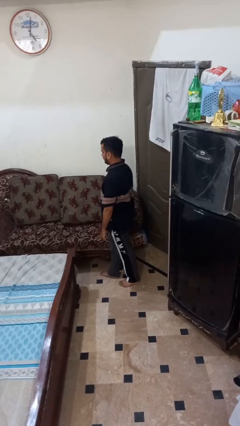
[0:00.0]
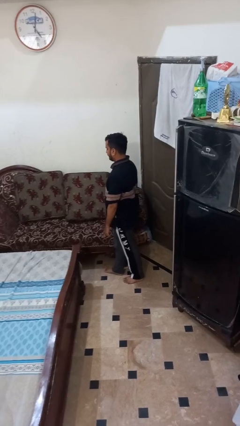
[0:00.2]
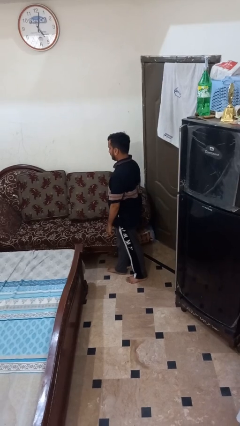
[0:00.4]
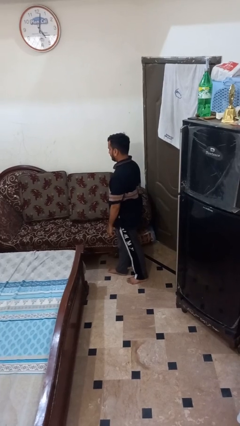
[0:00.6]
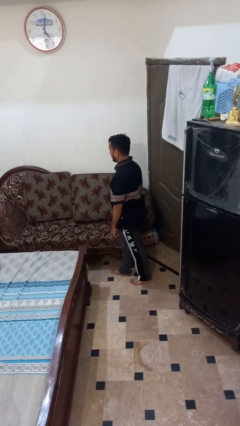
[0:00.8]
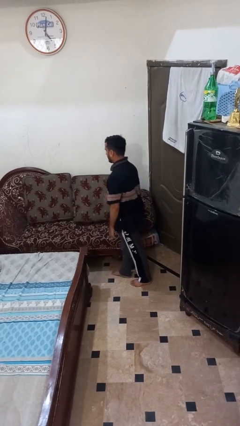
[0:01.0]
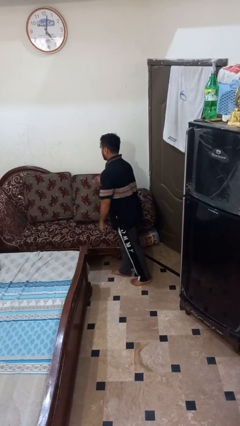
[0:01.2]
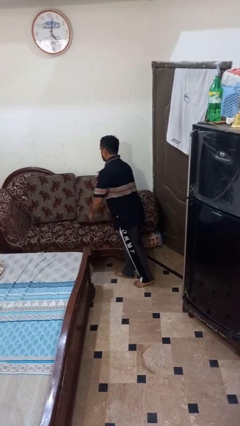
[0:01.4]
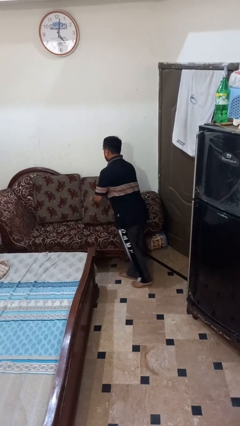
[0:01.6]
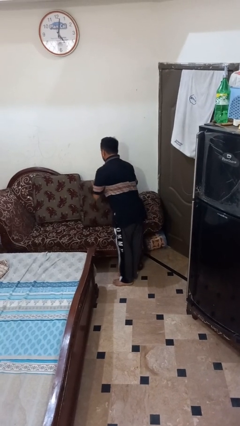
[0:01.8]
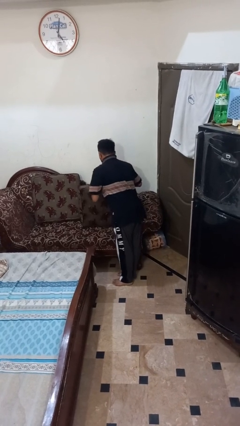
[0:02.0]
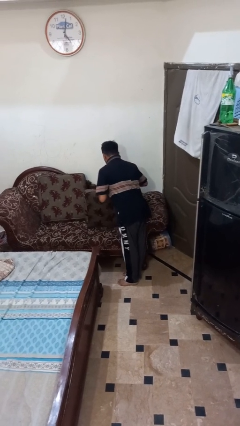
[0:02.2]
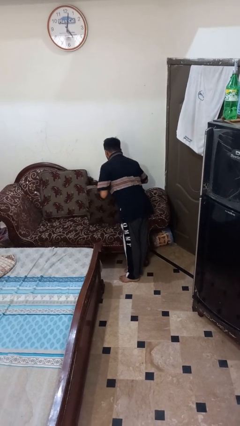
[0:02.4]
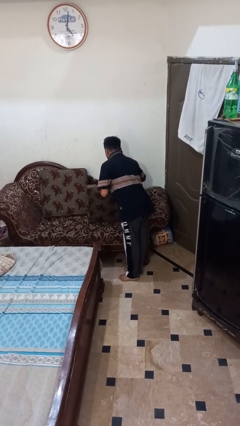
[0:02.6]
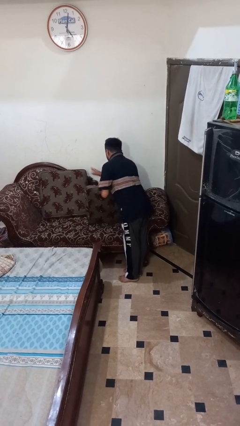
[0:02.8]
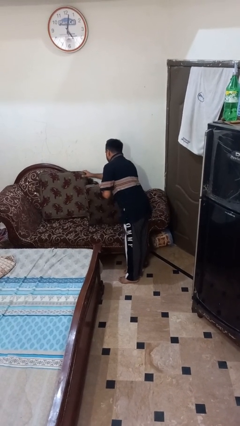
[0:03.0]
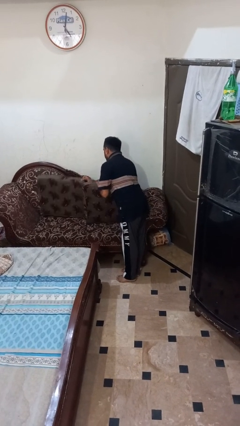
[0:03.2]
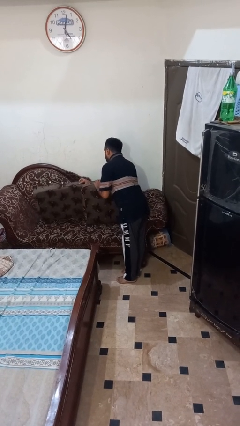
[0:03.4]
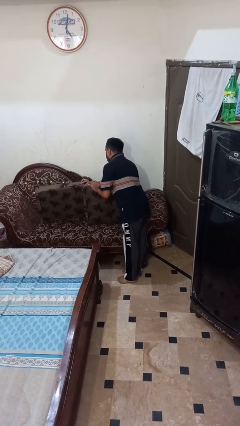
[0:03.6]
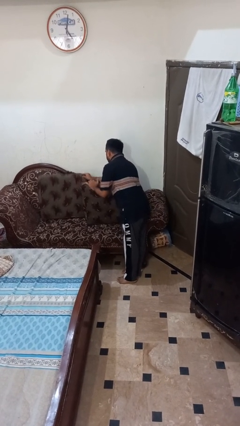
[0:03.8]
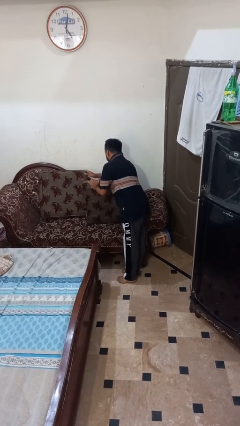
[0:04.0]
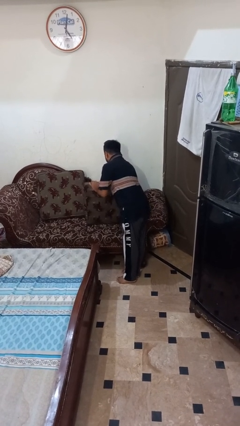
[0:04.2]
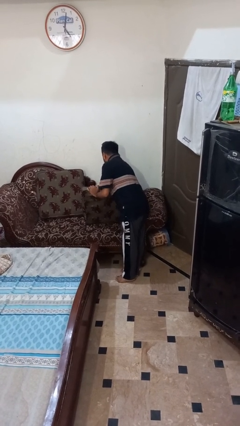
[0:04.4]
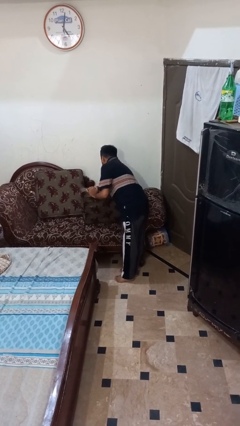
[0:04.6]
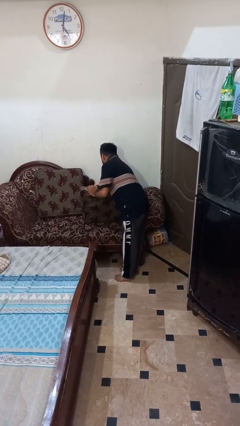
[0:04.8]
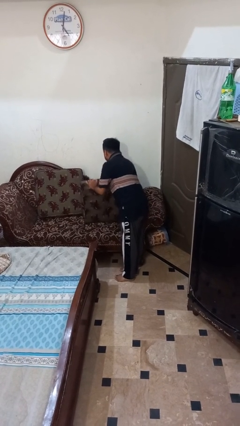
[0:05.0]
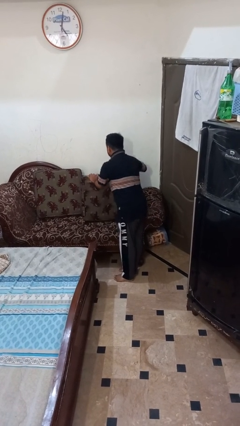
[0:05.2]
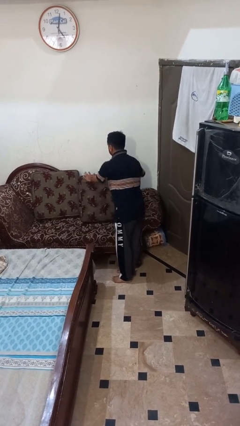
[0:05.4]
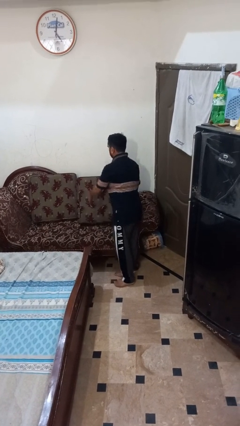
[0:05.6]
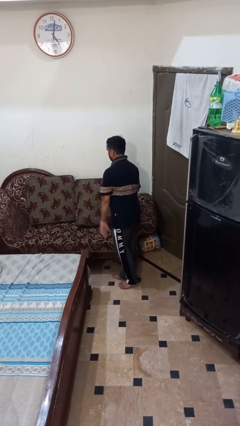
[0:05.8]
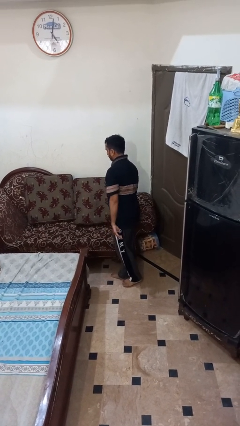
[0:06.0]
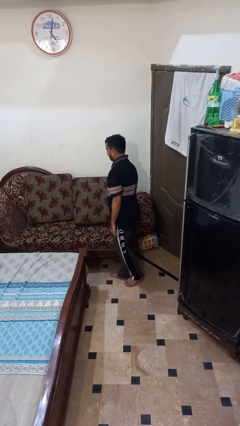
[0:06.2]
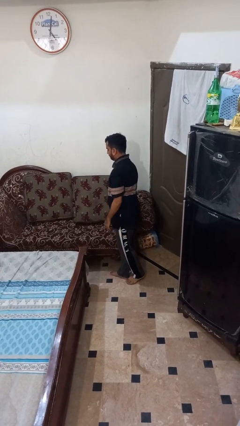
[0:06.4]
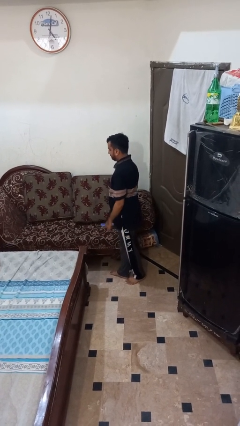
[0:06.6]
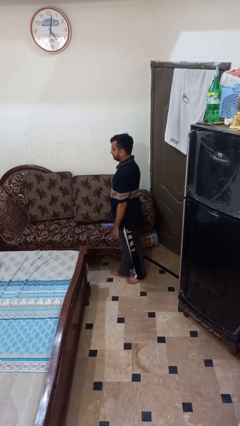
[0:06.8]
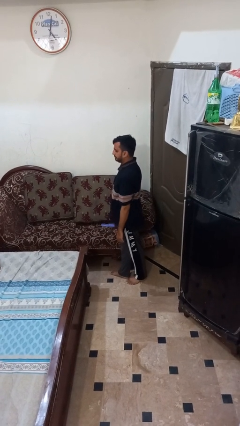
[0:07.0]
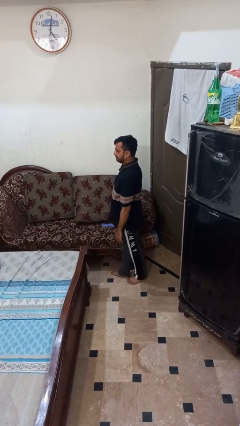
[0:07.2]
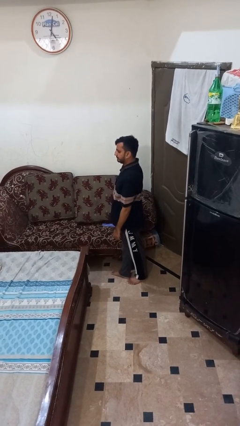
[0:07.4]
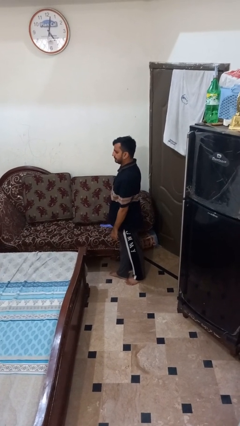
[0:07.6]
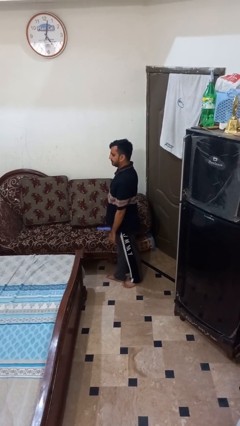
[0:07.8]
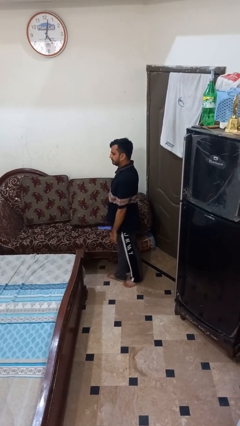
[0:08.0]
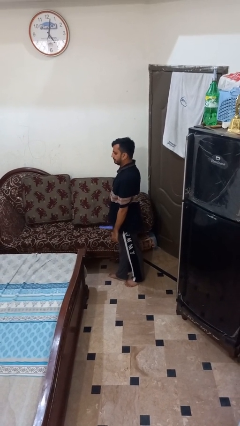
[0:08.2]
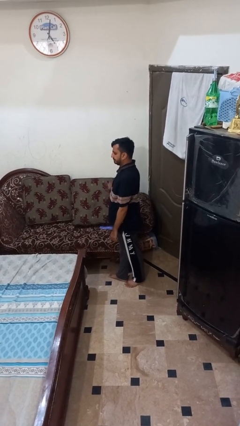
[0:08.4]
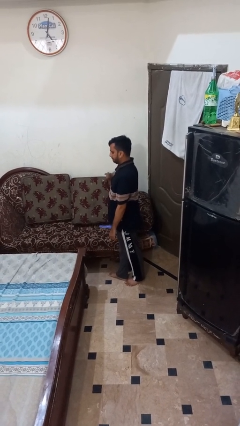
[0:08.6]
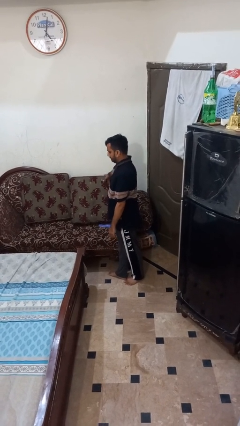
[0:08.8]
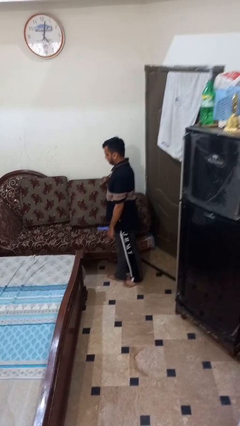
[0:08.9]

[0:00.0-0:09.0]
person searches in couch

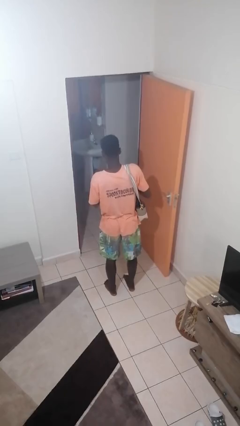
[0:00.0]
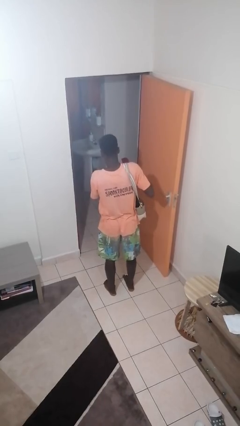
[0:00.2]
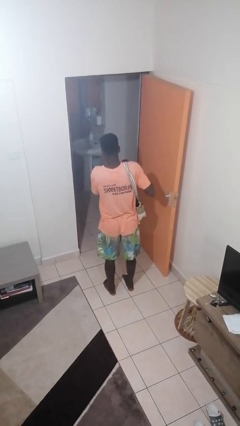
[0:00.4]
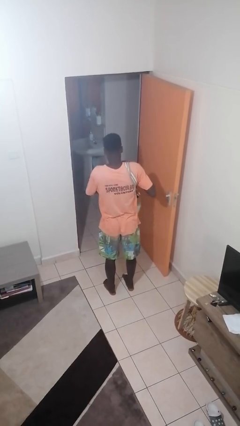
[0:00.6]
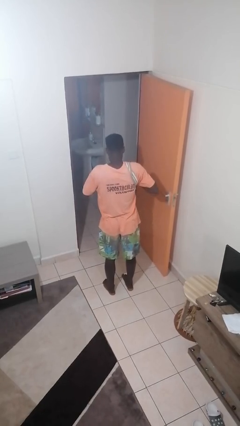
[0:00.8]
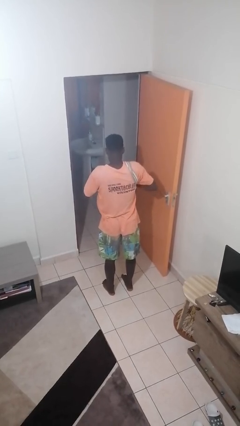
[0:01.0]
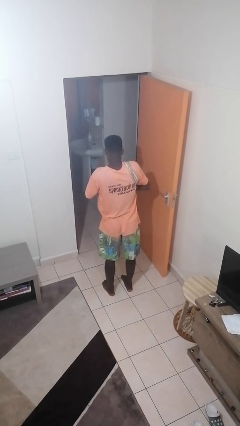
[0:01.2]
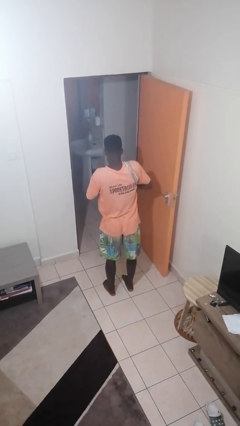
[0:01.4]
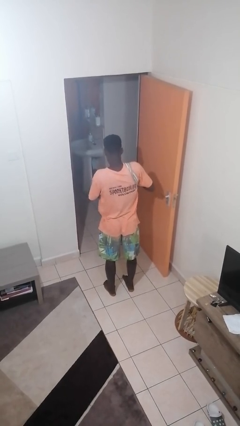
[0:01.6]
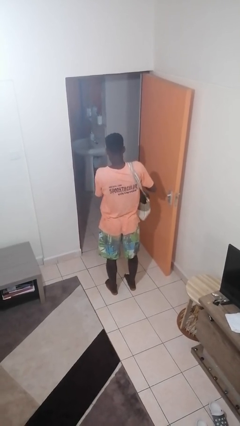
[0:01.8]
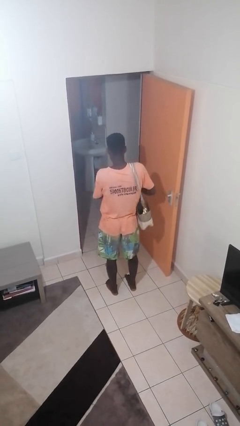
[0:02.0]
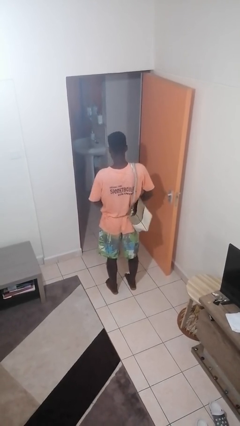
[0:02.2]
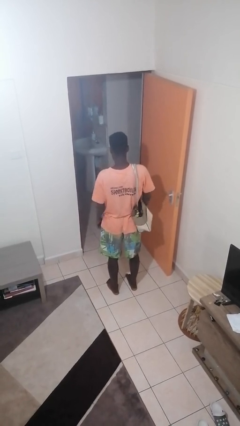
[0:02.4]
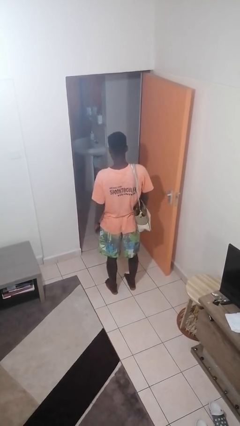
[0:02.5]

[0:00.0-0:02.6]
person puts object into purse

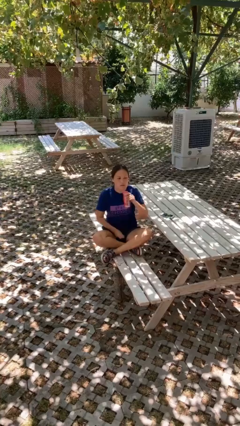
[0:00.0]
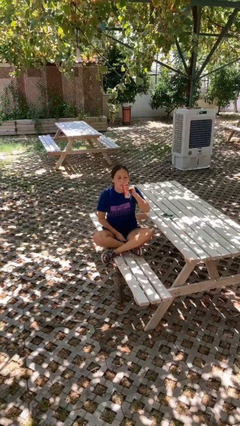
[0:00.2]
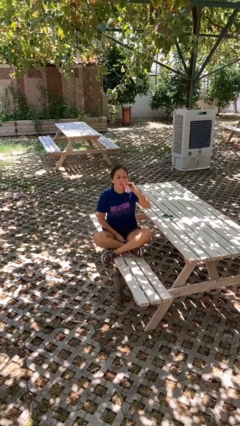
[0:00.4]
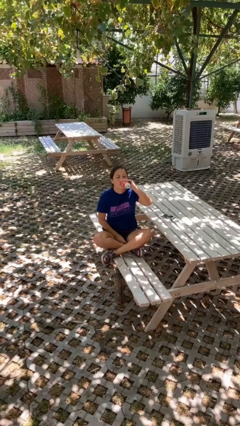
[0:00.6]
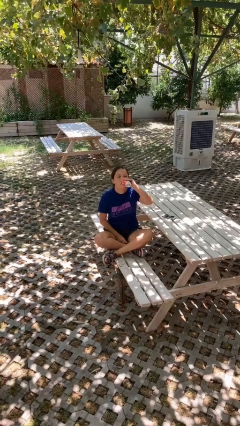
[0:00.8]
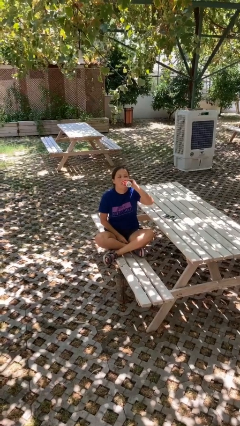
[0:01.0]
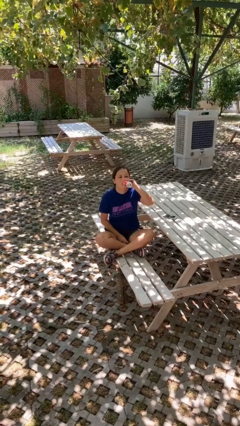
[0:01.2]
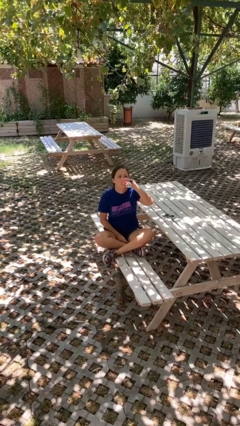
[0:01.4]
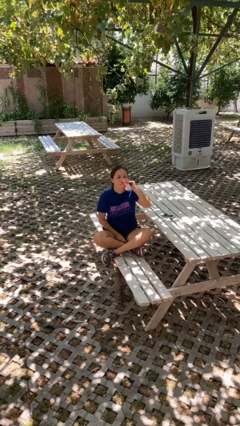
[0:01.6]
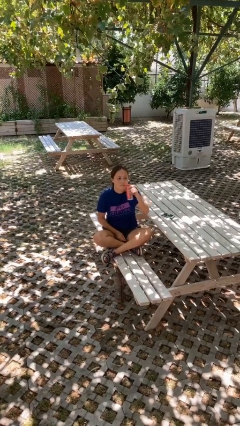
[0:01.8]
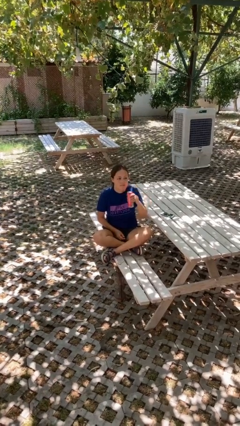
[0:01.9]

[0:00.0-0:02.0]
person drinks from beverage can

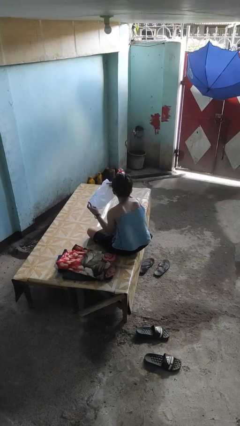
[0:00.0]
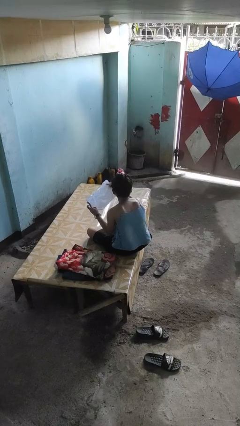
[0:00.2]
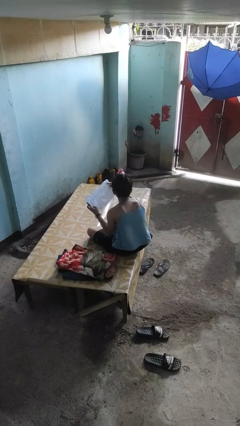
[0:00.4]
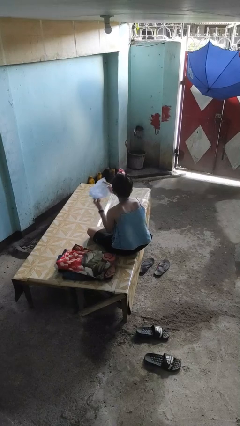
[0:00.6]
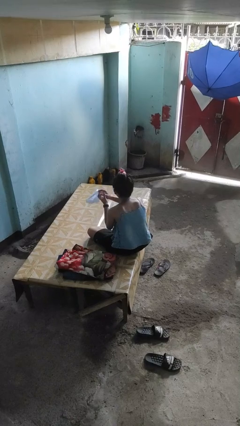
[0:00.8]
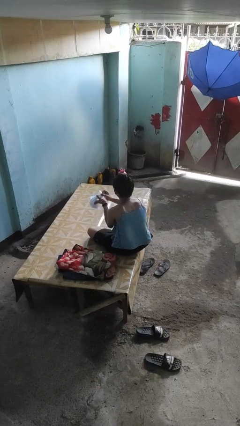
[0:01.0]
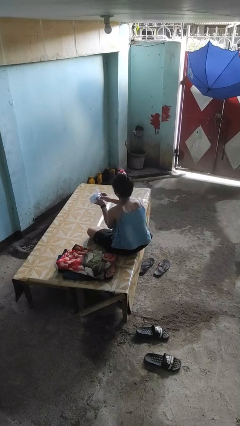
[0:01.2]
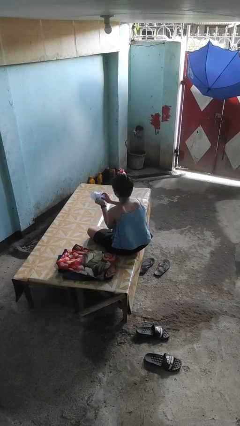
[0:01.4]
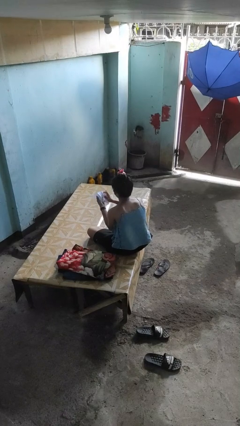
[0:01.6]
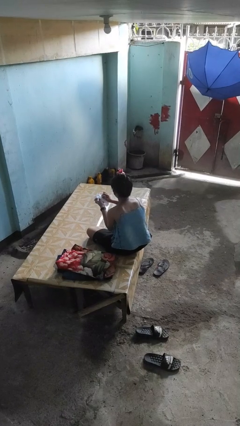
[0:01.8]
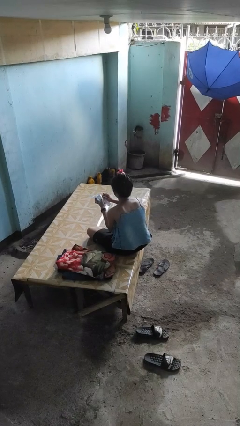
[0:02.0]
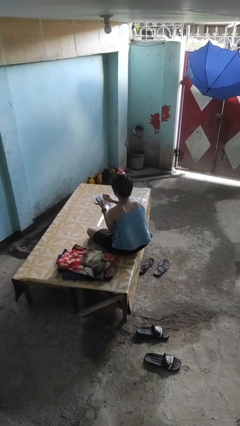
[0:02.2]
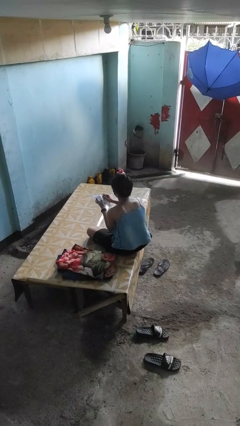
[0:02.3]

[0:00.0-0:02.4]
person crumples paper

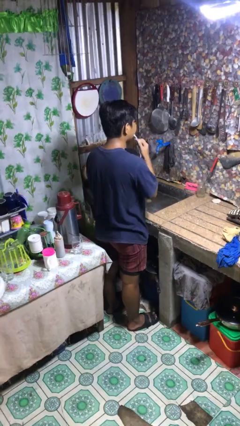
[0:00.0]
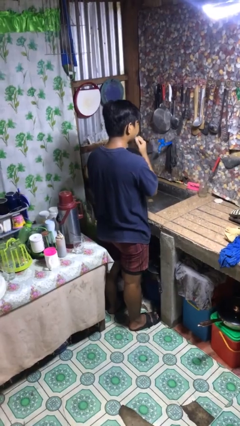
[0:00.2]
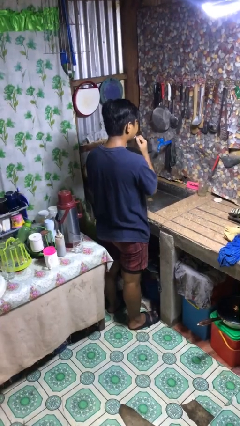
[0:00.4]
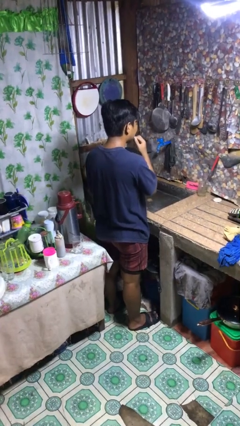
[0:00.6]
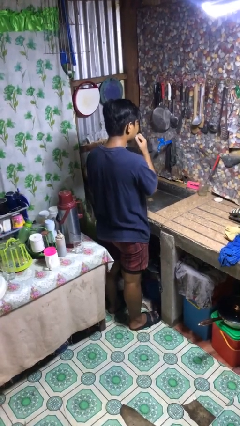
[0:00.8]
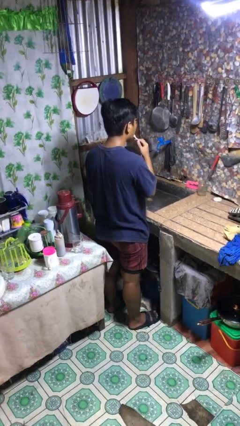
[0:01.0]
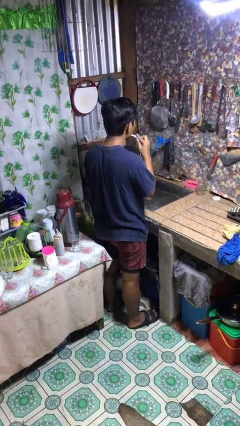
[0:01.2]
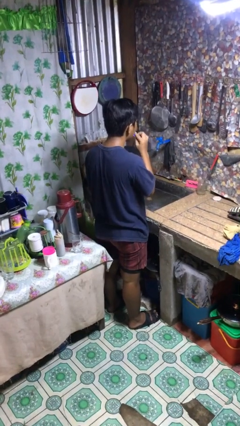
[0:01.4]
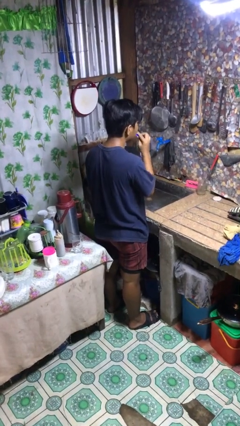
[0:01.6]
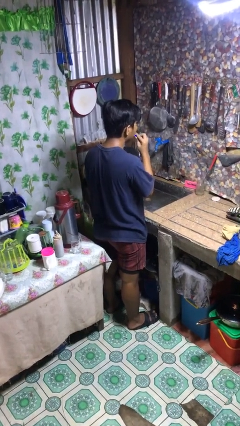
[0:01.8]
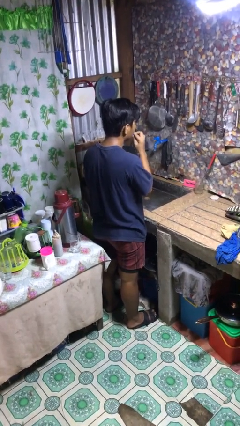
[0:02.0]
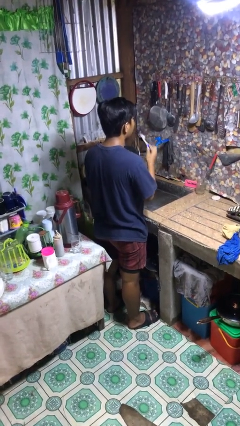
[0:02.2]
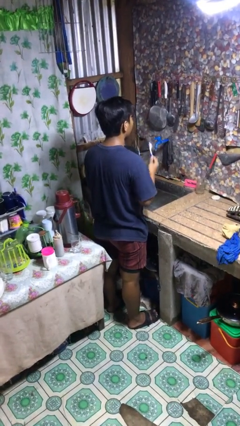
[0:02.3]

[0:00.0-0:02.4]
person brushes teeth
